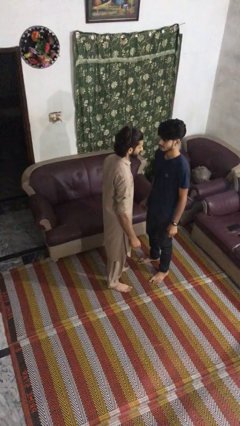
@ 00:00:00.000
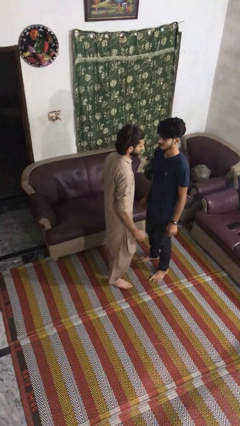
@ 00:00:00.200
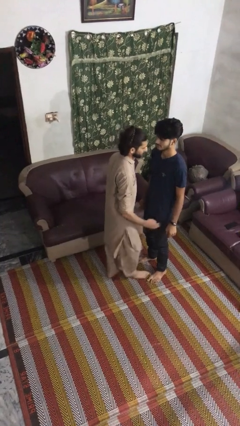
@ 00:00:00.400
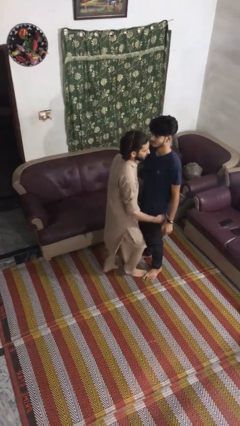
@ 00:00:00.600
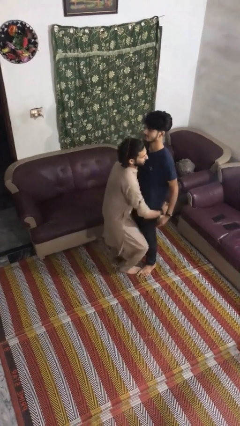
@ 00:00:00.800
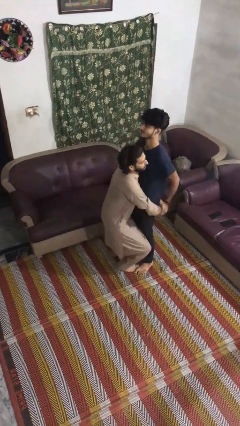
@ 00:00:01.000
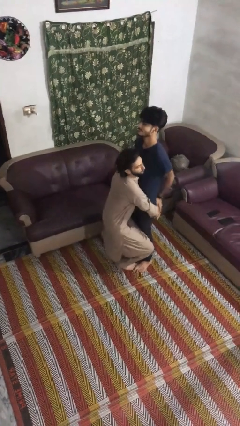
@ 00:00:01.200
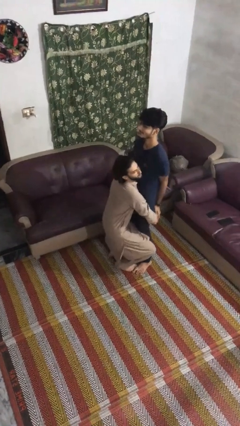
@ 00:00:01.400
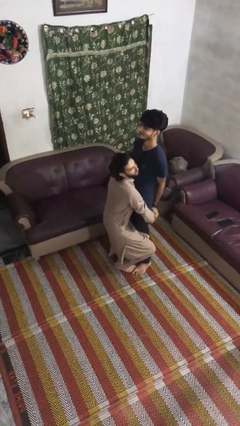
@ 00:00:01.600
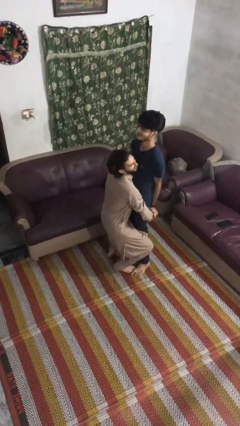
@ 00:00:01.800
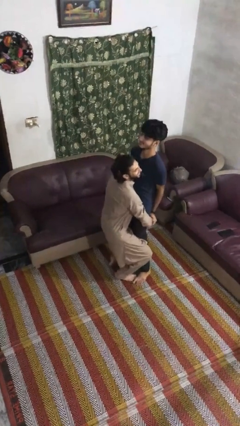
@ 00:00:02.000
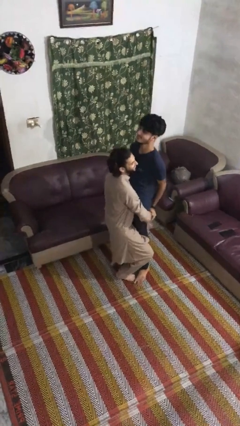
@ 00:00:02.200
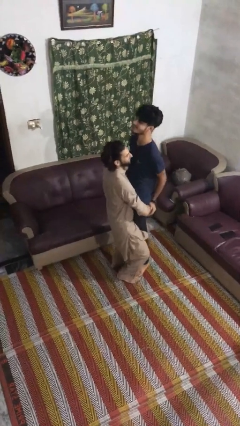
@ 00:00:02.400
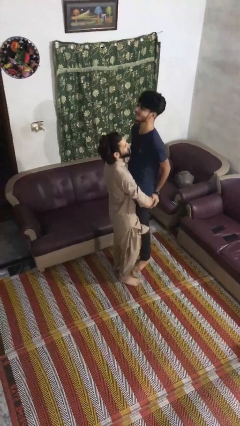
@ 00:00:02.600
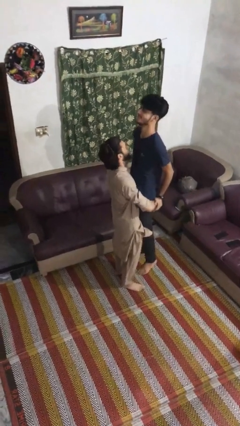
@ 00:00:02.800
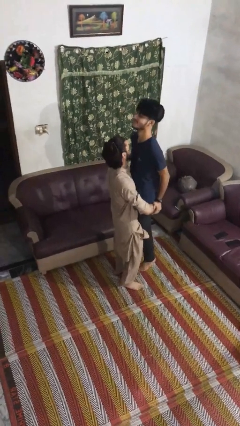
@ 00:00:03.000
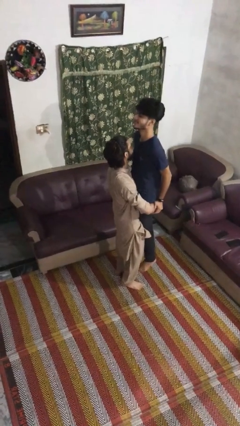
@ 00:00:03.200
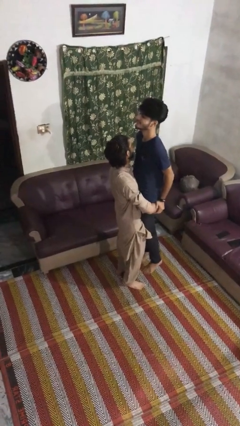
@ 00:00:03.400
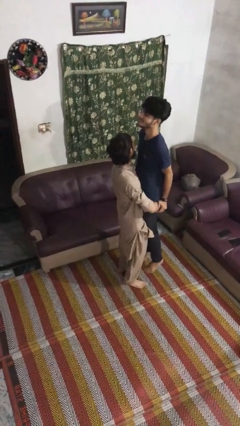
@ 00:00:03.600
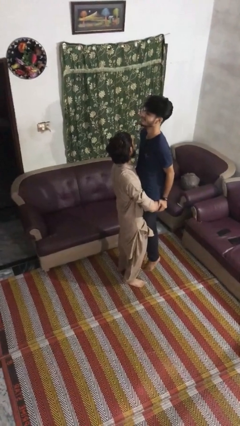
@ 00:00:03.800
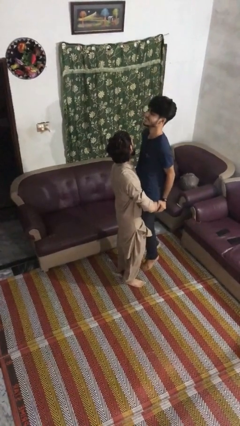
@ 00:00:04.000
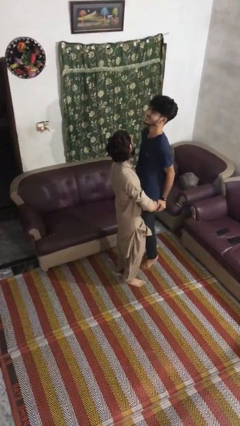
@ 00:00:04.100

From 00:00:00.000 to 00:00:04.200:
person picks up person

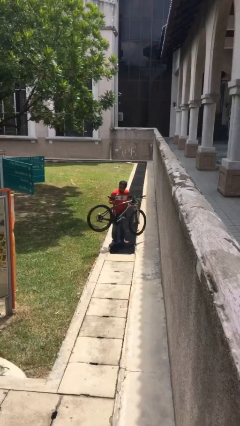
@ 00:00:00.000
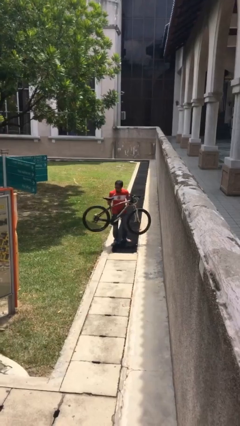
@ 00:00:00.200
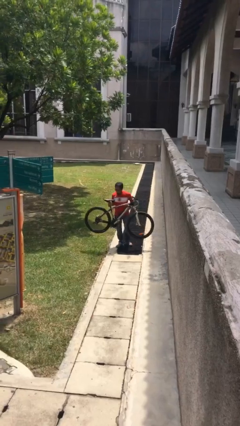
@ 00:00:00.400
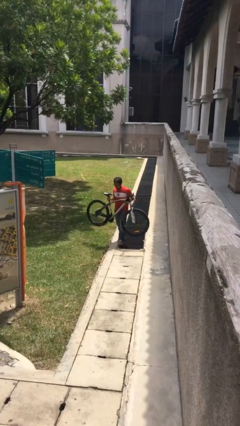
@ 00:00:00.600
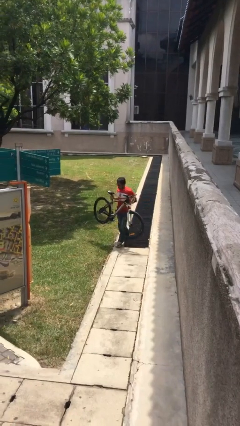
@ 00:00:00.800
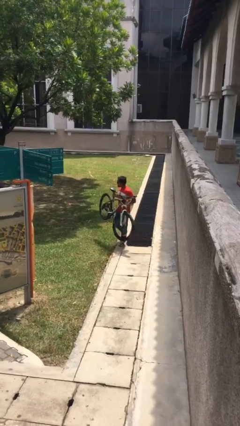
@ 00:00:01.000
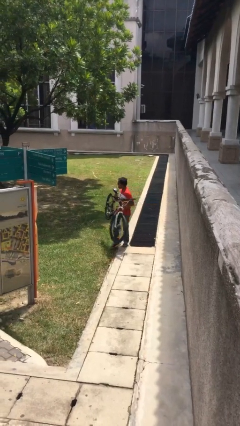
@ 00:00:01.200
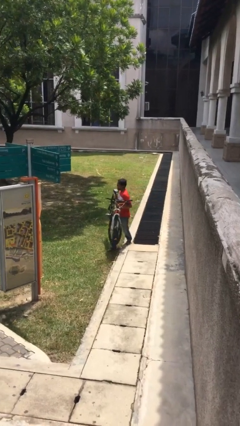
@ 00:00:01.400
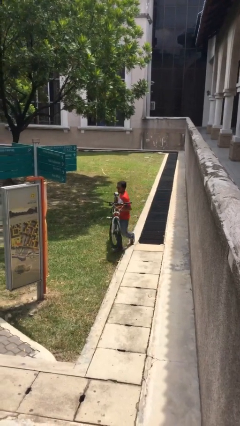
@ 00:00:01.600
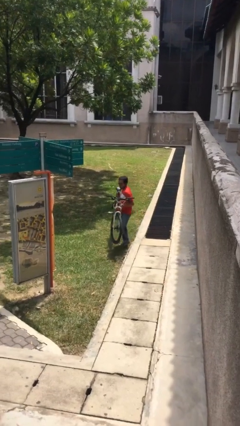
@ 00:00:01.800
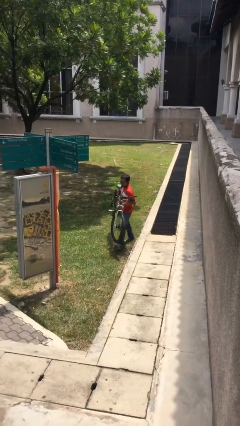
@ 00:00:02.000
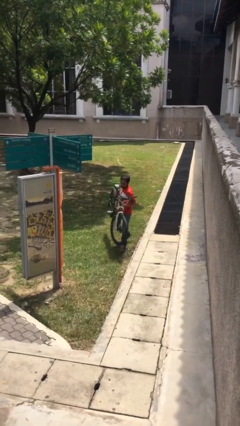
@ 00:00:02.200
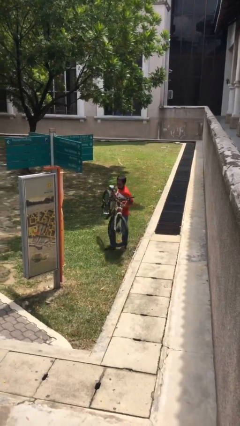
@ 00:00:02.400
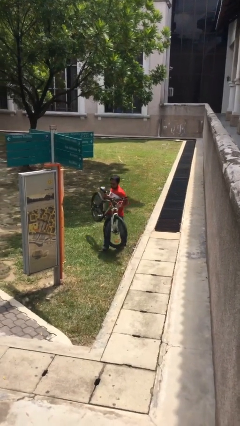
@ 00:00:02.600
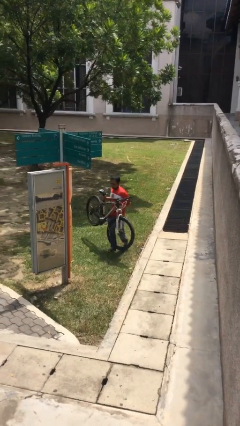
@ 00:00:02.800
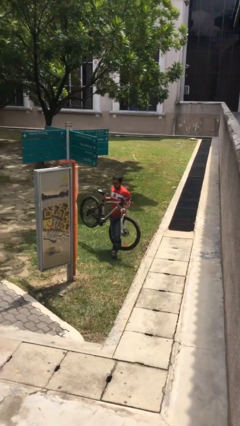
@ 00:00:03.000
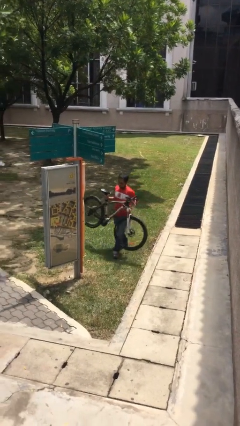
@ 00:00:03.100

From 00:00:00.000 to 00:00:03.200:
person carries heavy object

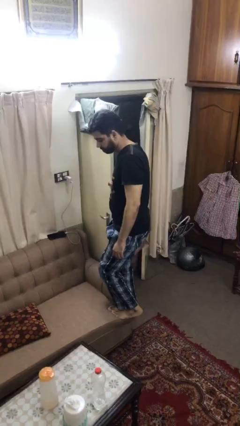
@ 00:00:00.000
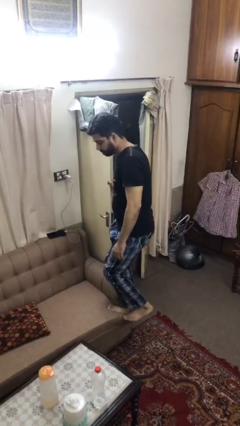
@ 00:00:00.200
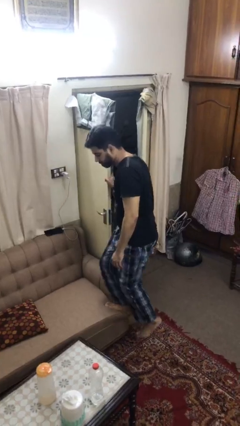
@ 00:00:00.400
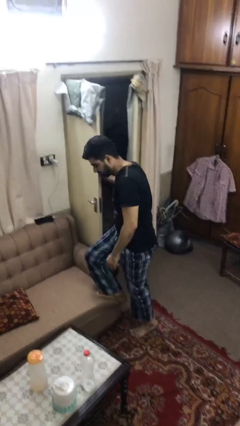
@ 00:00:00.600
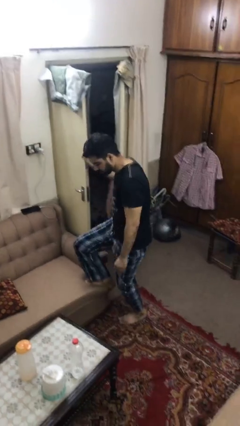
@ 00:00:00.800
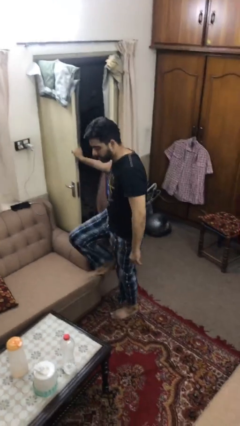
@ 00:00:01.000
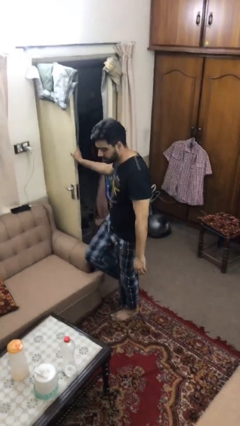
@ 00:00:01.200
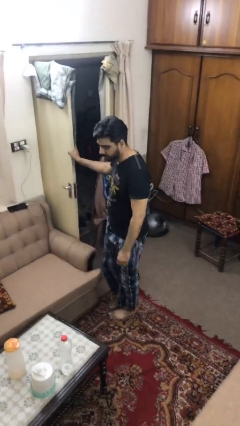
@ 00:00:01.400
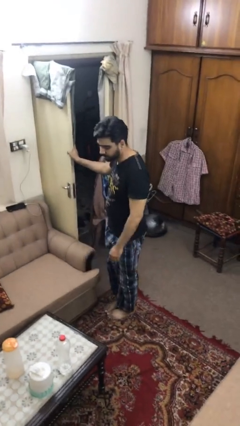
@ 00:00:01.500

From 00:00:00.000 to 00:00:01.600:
person climbs off couch

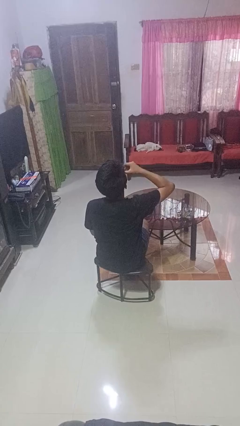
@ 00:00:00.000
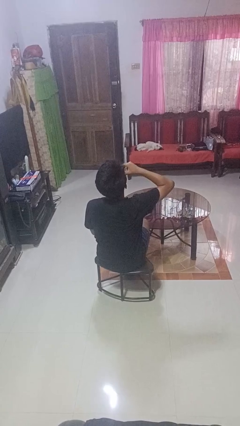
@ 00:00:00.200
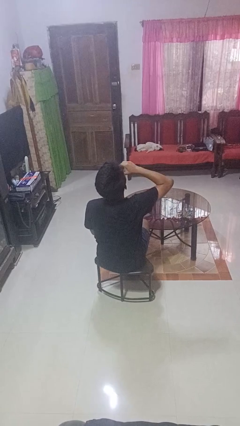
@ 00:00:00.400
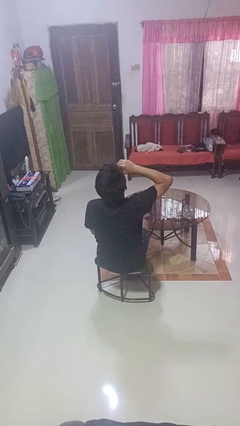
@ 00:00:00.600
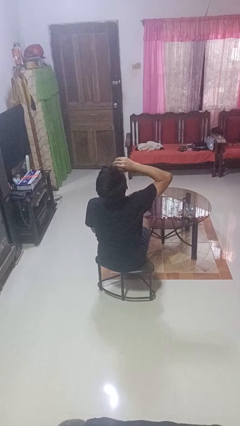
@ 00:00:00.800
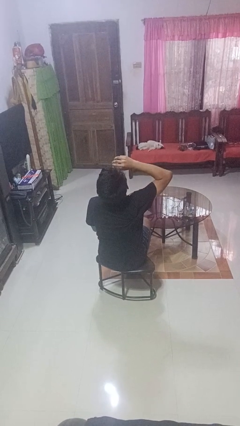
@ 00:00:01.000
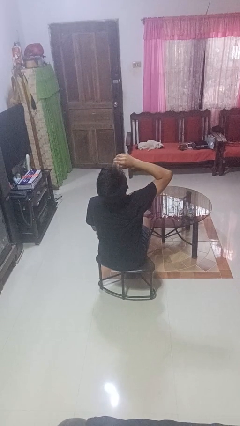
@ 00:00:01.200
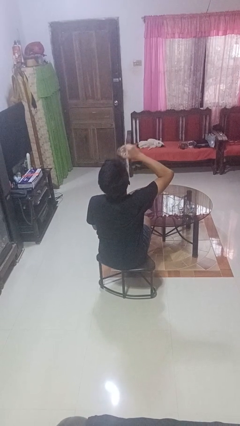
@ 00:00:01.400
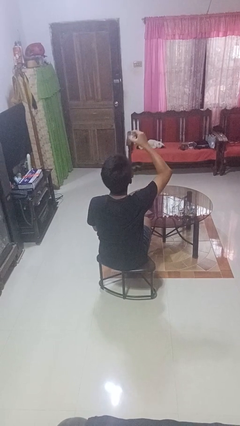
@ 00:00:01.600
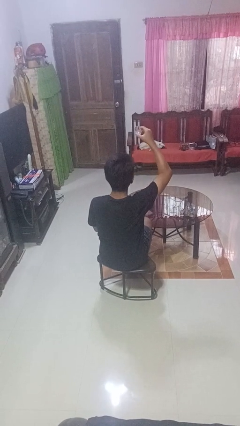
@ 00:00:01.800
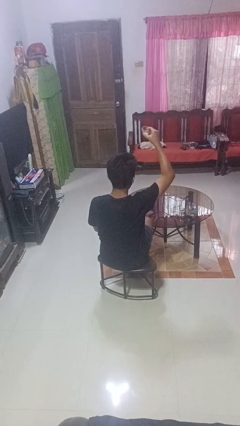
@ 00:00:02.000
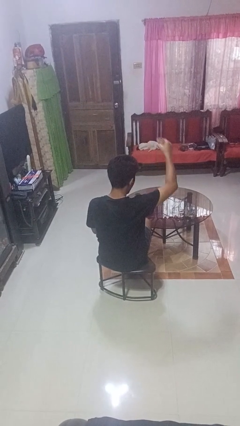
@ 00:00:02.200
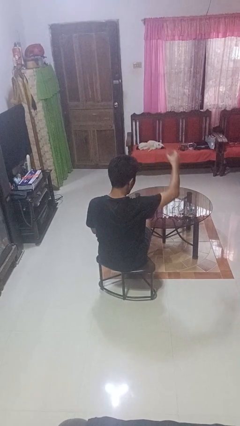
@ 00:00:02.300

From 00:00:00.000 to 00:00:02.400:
person drinks from shotglass

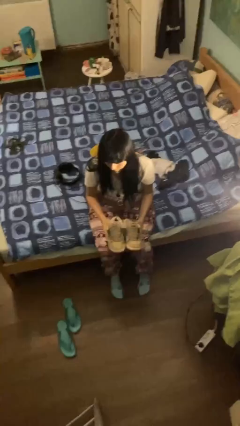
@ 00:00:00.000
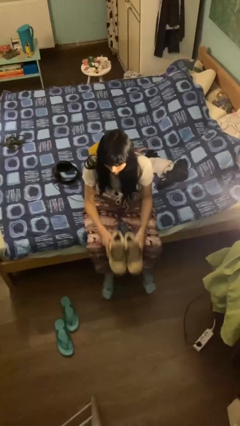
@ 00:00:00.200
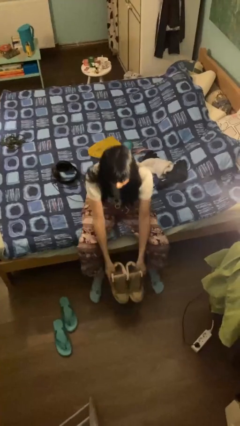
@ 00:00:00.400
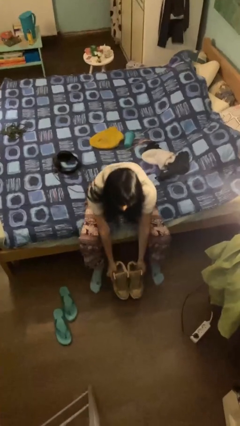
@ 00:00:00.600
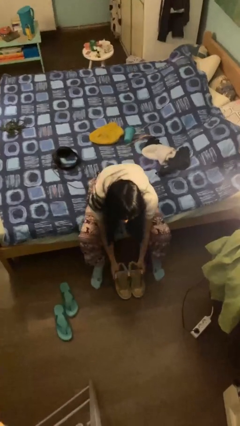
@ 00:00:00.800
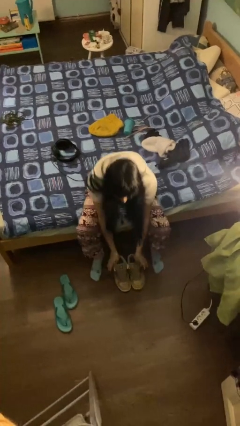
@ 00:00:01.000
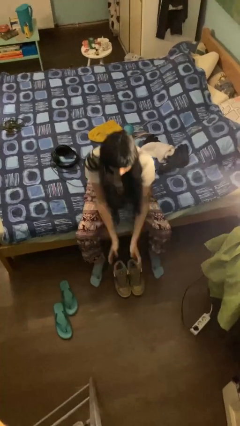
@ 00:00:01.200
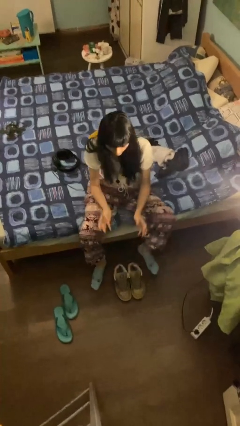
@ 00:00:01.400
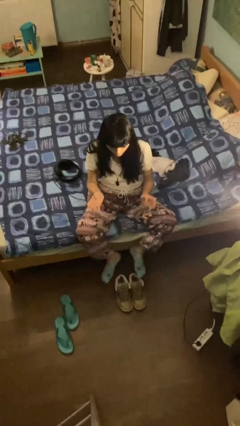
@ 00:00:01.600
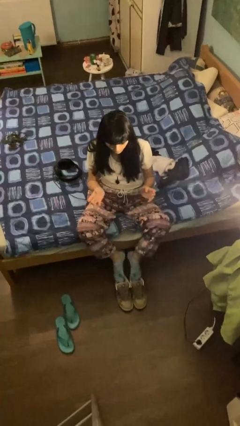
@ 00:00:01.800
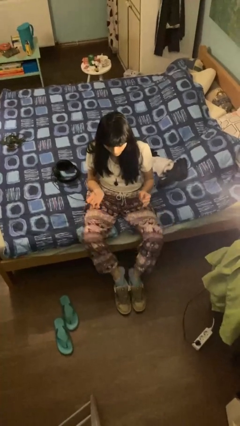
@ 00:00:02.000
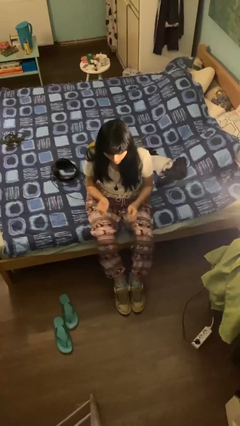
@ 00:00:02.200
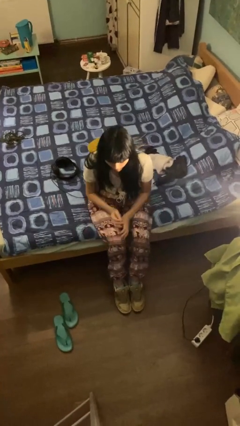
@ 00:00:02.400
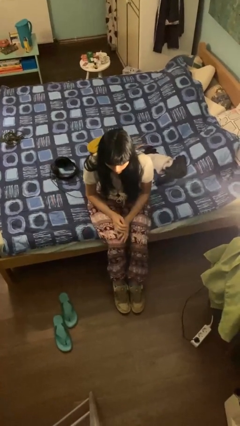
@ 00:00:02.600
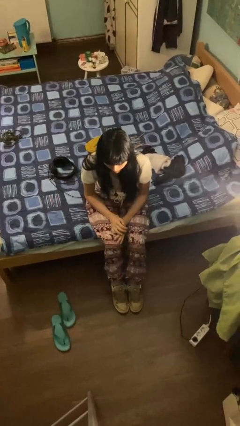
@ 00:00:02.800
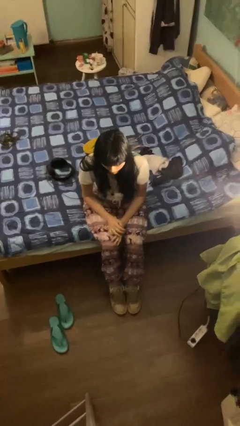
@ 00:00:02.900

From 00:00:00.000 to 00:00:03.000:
person puts on shoes

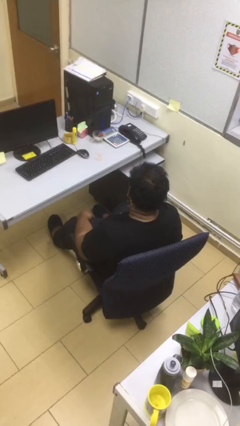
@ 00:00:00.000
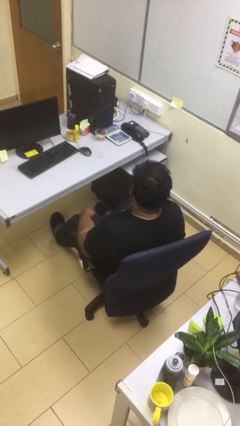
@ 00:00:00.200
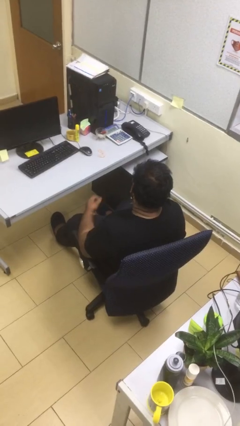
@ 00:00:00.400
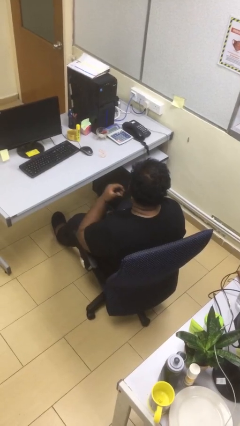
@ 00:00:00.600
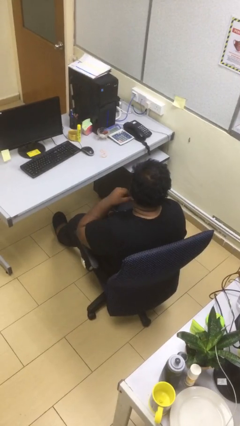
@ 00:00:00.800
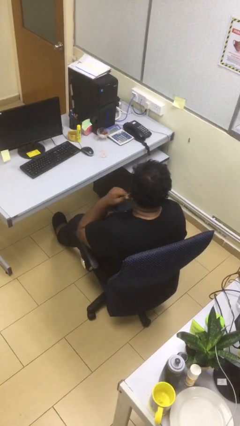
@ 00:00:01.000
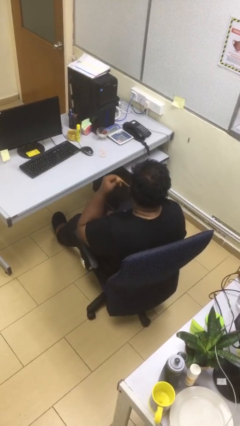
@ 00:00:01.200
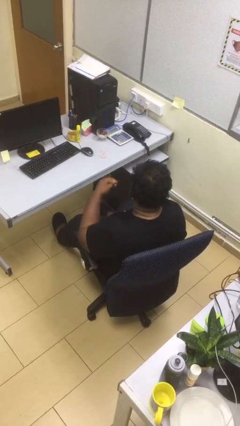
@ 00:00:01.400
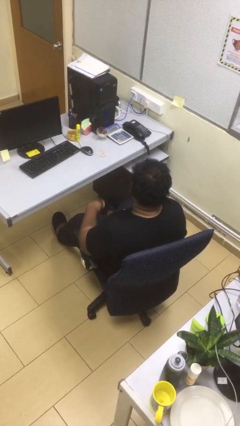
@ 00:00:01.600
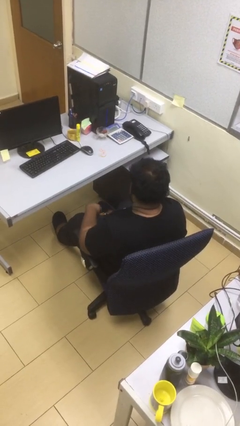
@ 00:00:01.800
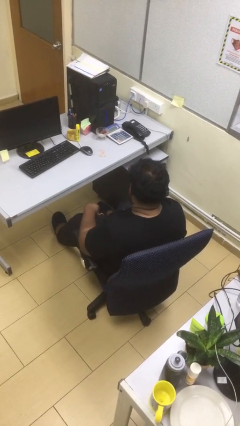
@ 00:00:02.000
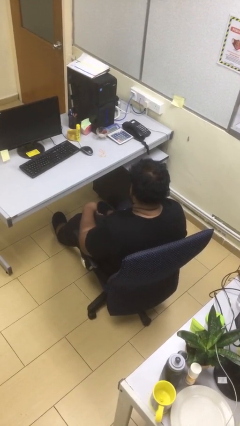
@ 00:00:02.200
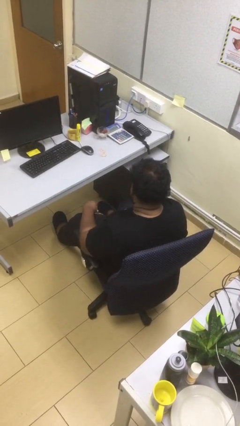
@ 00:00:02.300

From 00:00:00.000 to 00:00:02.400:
person takes off earrings
